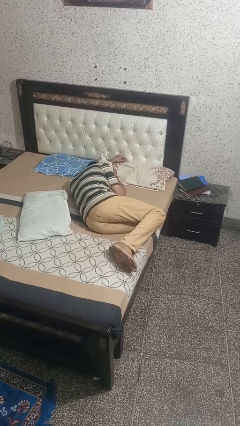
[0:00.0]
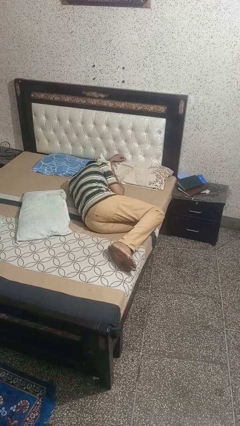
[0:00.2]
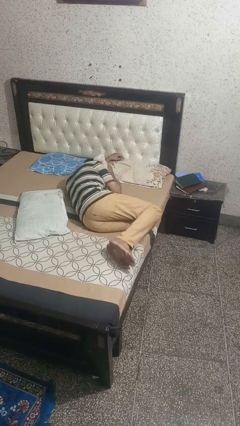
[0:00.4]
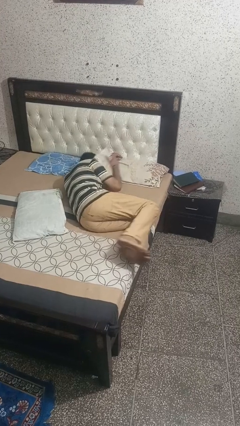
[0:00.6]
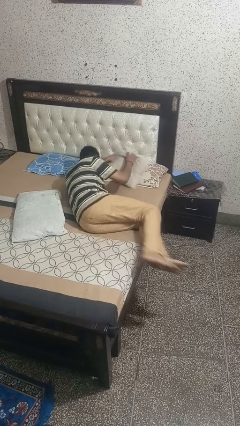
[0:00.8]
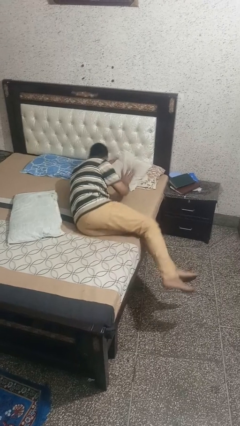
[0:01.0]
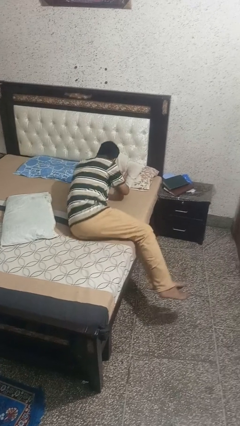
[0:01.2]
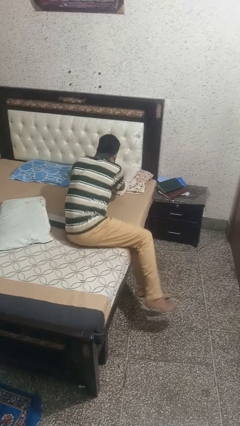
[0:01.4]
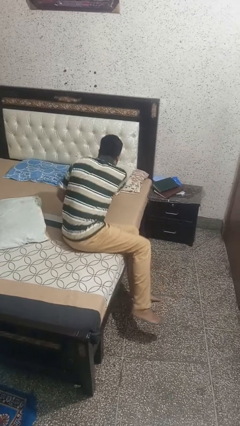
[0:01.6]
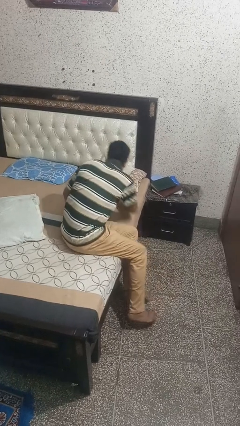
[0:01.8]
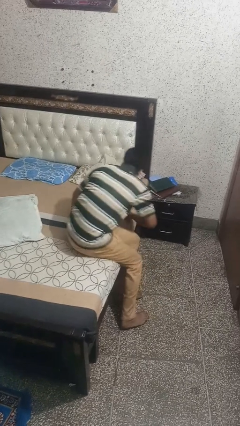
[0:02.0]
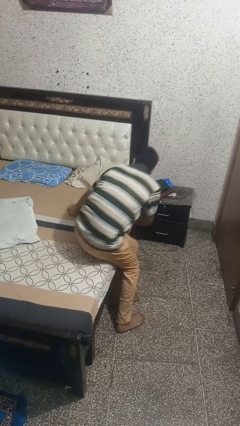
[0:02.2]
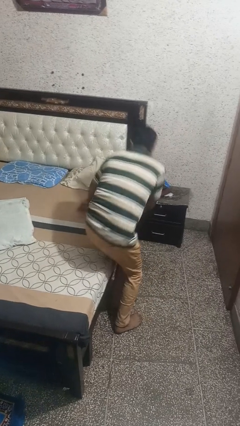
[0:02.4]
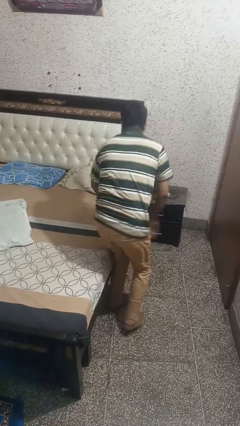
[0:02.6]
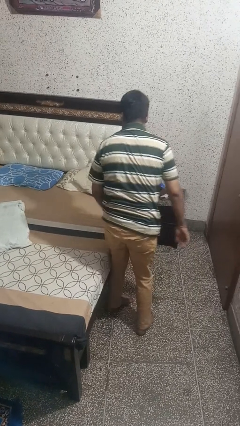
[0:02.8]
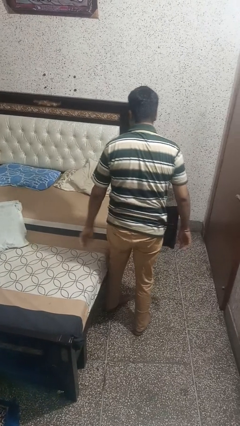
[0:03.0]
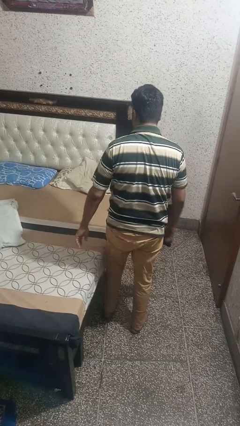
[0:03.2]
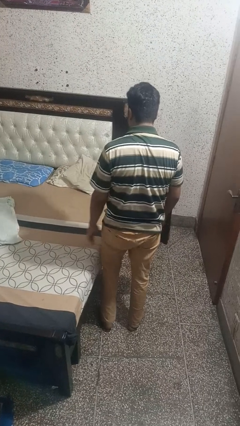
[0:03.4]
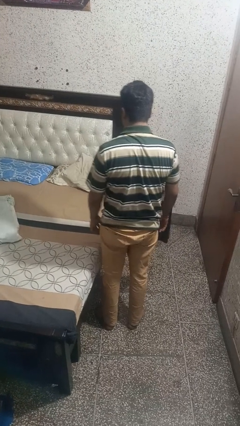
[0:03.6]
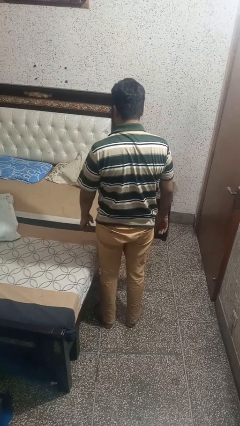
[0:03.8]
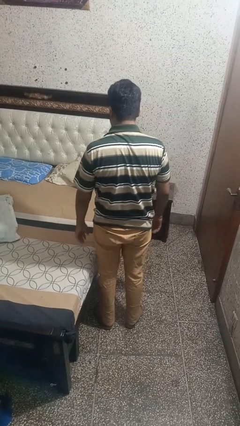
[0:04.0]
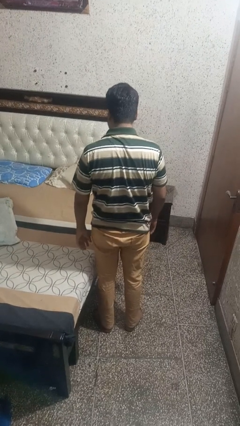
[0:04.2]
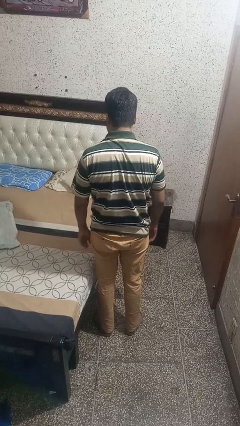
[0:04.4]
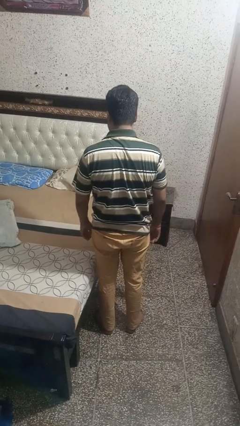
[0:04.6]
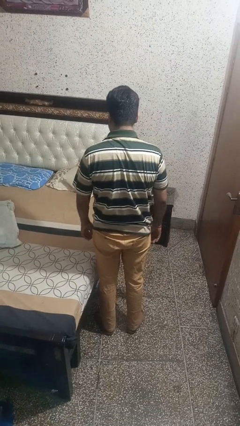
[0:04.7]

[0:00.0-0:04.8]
person stands up

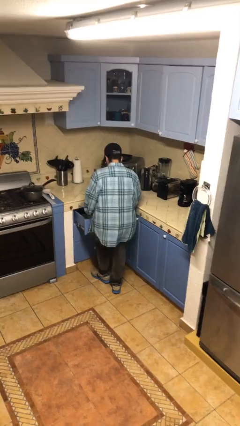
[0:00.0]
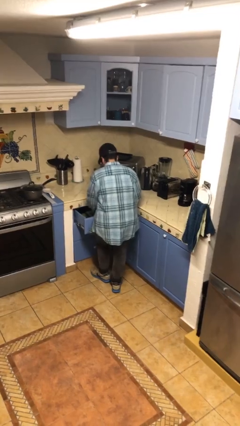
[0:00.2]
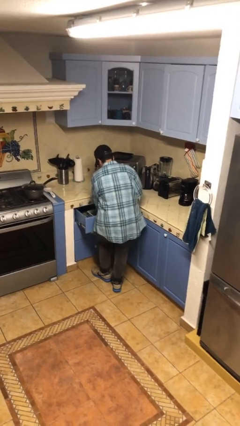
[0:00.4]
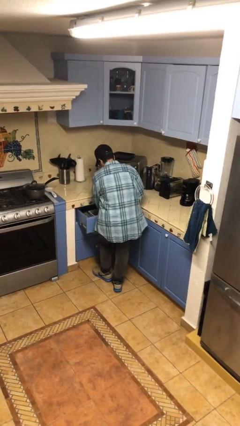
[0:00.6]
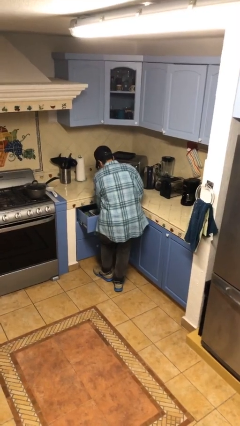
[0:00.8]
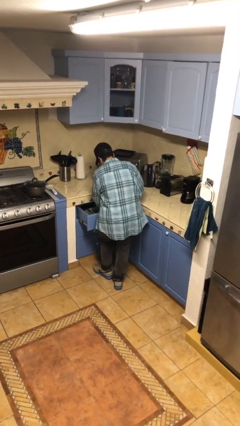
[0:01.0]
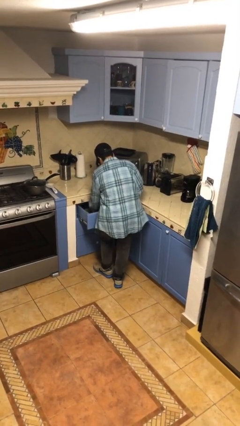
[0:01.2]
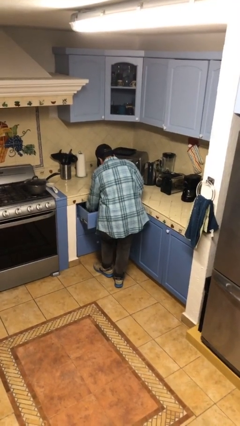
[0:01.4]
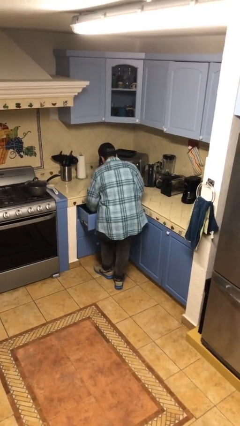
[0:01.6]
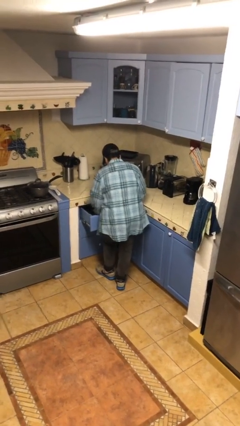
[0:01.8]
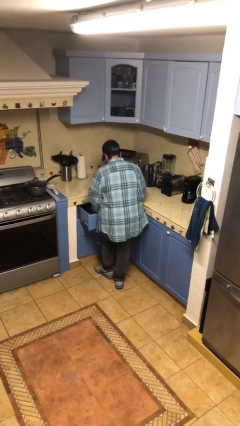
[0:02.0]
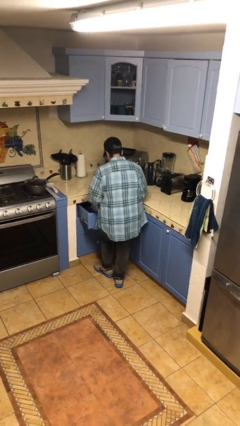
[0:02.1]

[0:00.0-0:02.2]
person searches in kitchen drawer

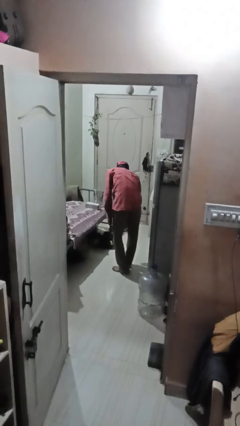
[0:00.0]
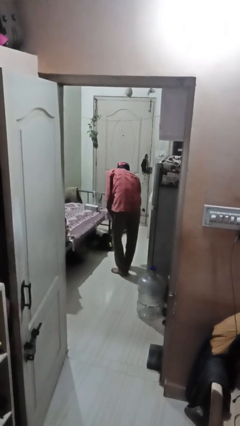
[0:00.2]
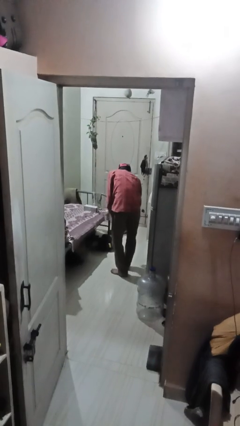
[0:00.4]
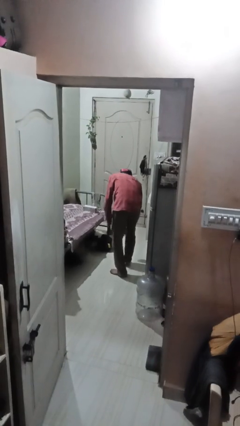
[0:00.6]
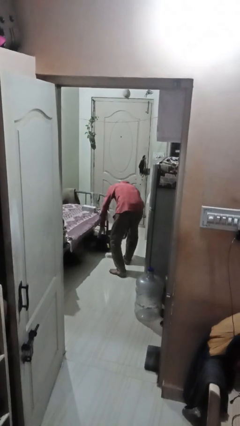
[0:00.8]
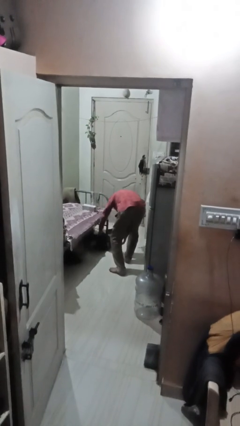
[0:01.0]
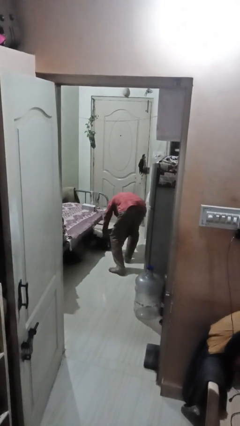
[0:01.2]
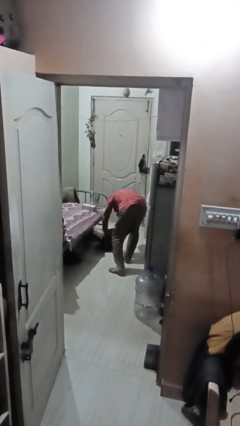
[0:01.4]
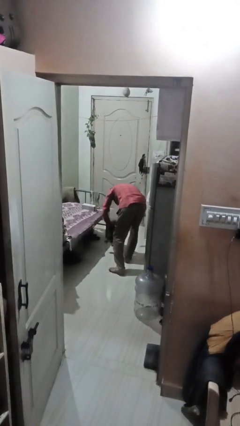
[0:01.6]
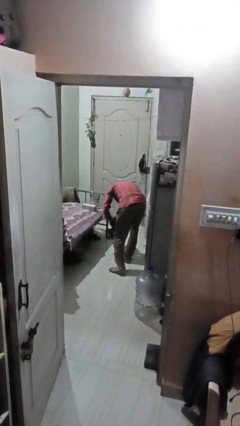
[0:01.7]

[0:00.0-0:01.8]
person picks up object from floor

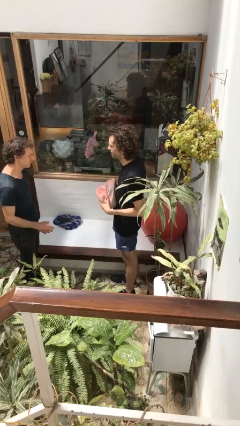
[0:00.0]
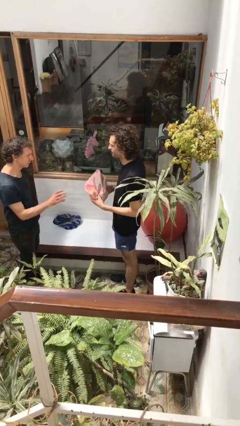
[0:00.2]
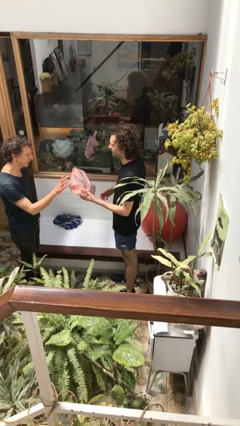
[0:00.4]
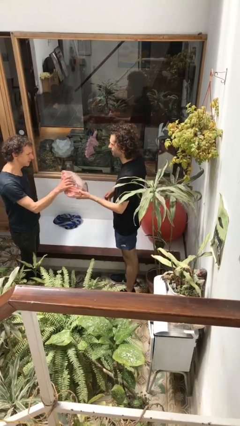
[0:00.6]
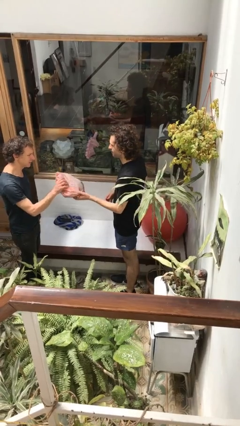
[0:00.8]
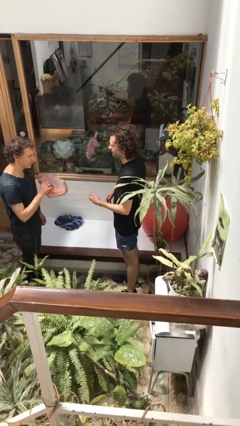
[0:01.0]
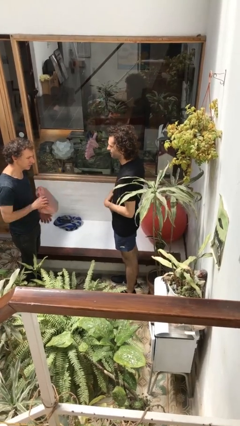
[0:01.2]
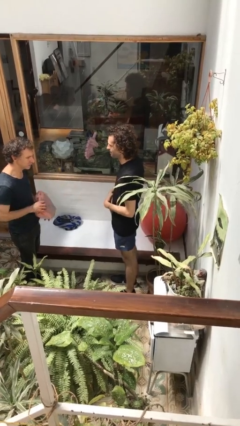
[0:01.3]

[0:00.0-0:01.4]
person transfers object to person

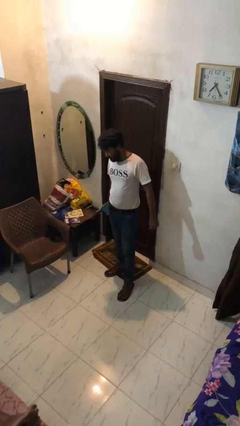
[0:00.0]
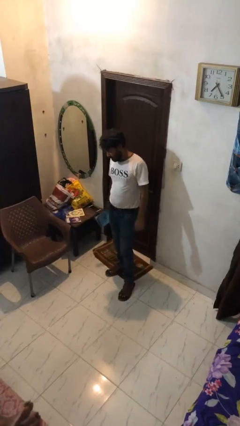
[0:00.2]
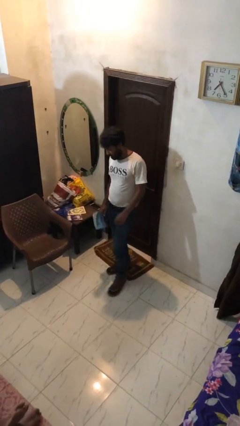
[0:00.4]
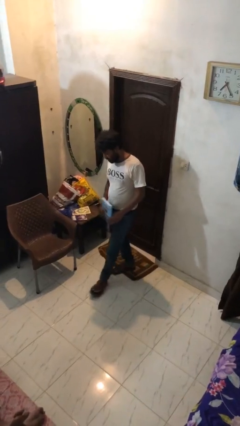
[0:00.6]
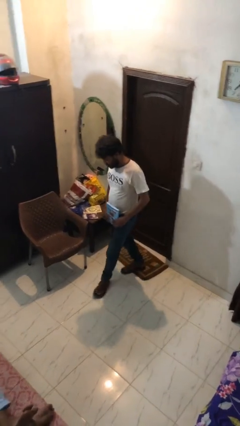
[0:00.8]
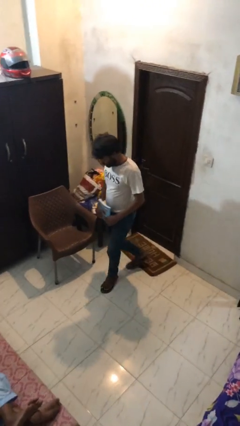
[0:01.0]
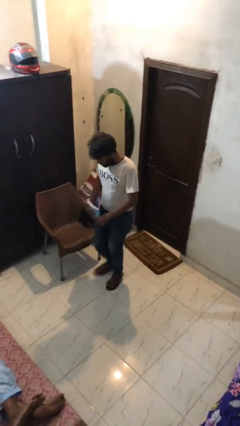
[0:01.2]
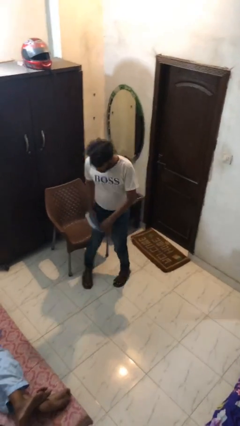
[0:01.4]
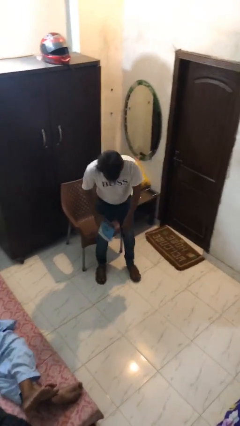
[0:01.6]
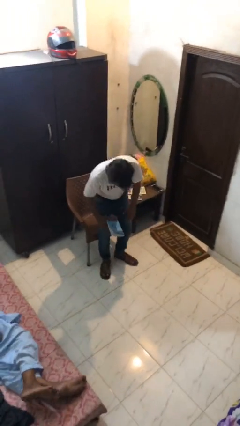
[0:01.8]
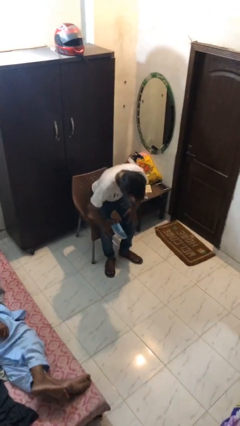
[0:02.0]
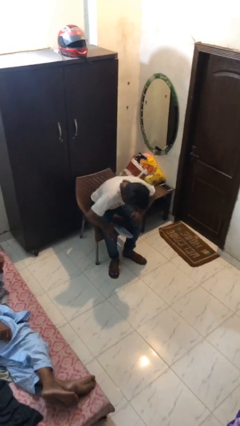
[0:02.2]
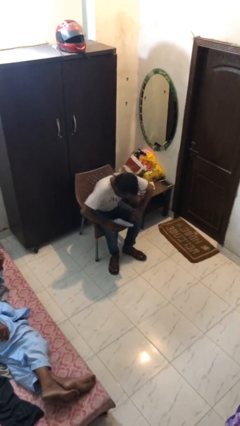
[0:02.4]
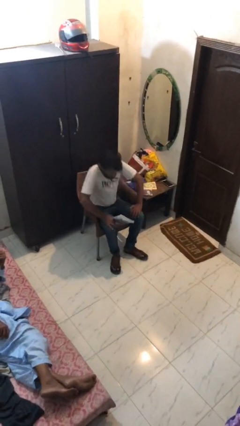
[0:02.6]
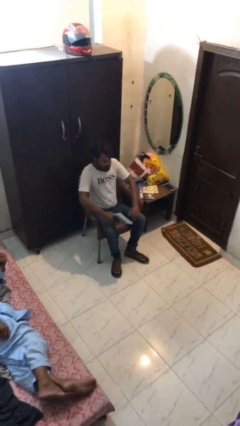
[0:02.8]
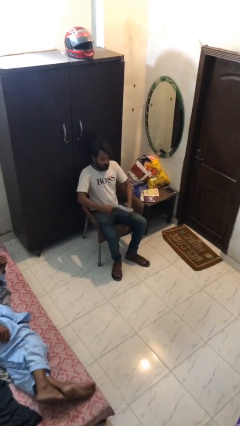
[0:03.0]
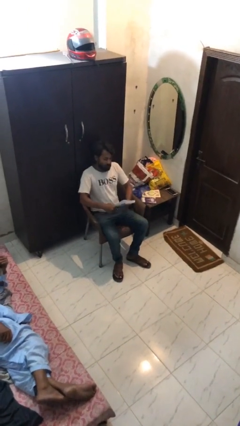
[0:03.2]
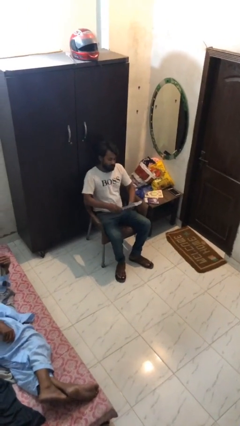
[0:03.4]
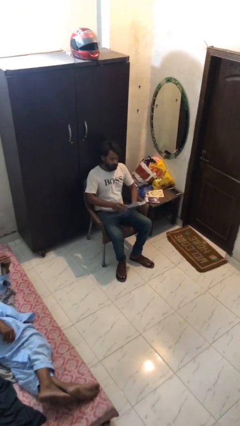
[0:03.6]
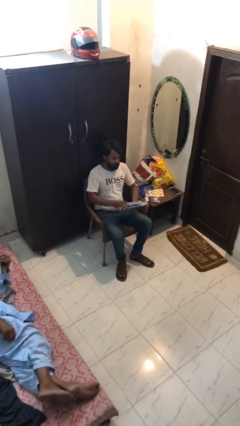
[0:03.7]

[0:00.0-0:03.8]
person sits down

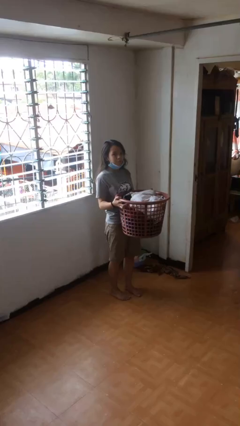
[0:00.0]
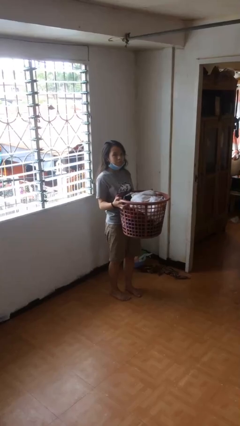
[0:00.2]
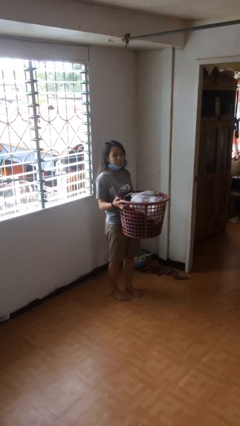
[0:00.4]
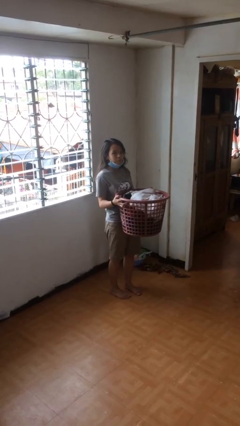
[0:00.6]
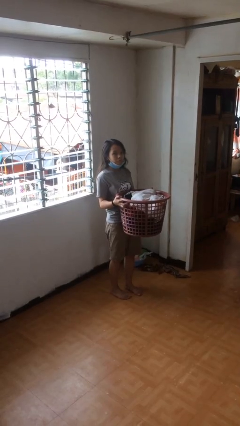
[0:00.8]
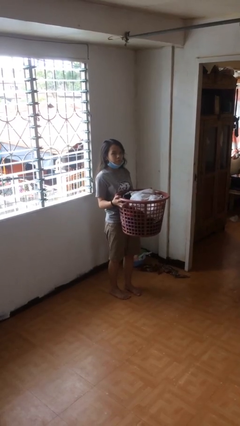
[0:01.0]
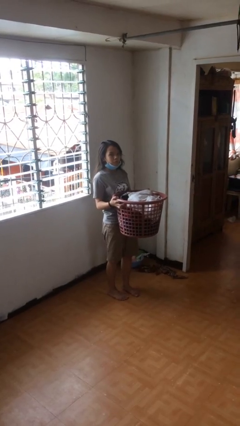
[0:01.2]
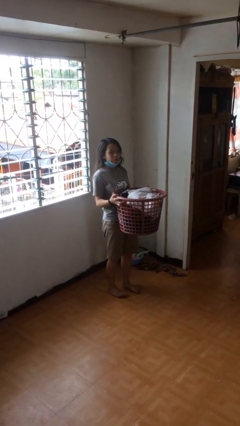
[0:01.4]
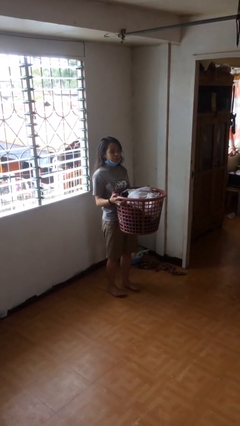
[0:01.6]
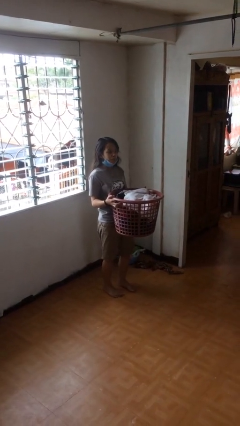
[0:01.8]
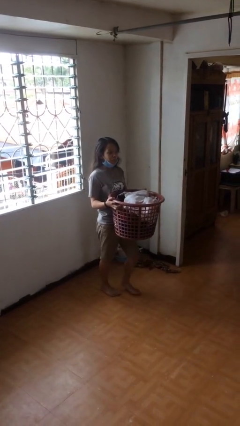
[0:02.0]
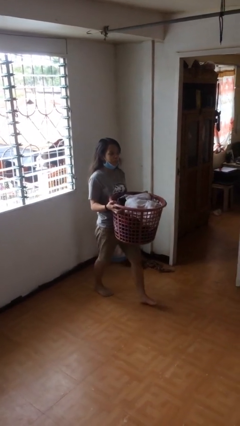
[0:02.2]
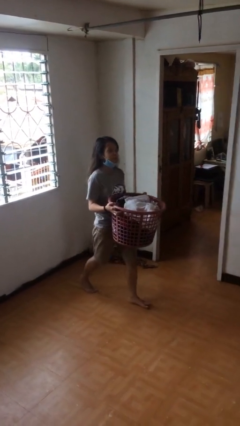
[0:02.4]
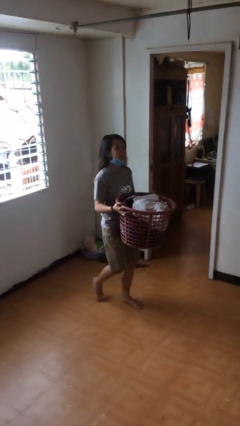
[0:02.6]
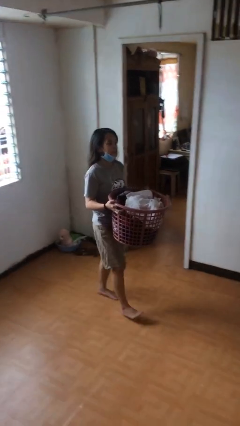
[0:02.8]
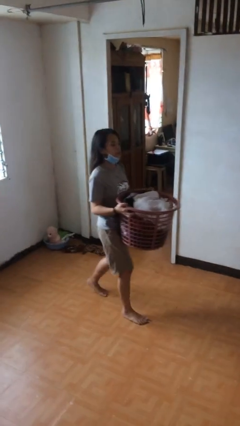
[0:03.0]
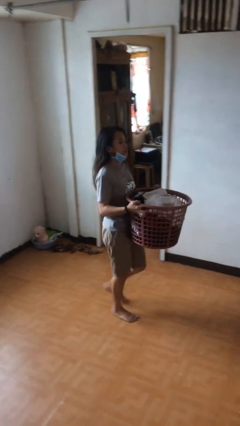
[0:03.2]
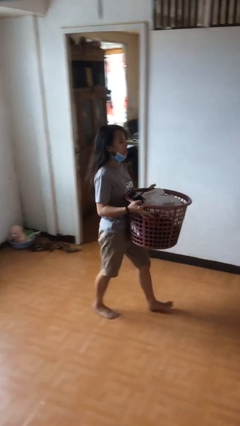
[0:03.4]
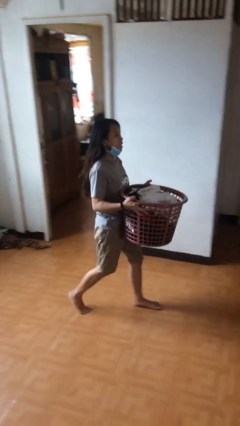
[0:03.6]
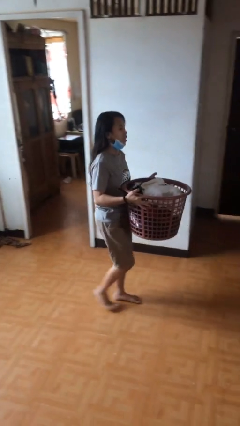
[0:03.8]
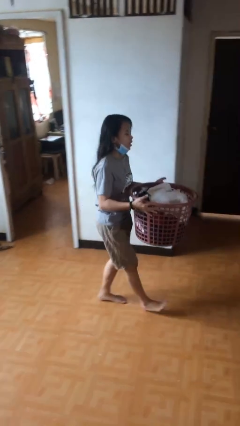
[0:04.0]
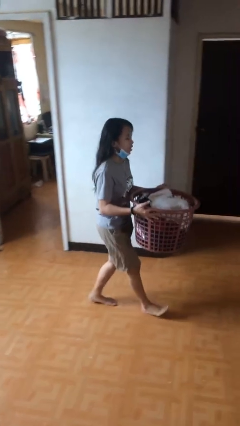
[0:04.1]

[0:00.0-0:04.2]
person carries heavy object
